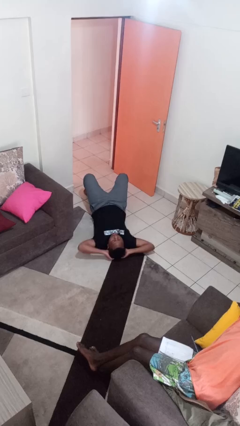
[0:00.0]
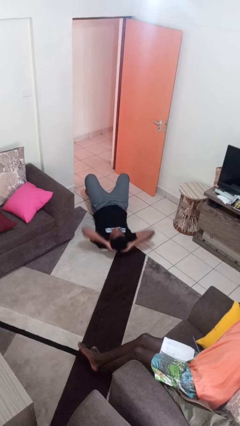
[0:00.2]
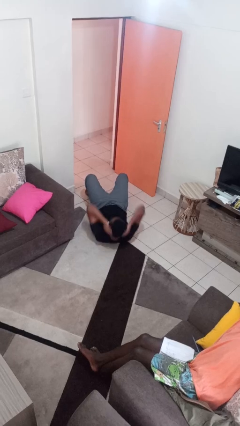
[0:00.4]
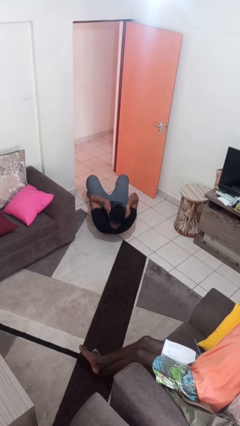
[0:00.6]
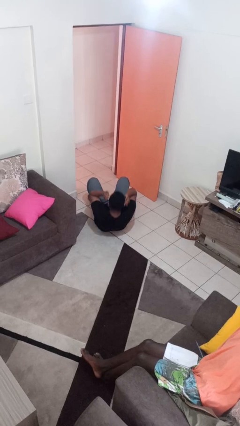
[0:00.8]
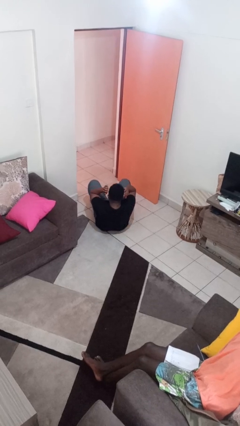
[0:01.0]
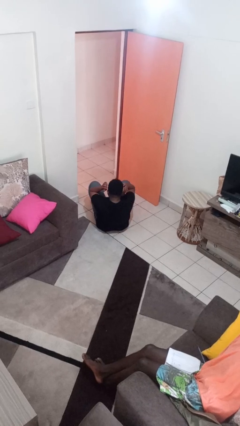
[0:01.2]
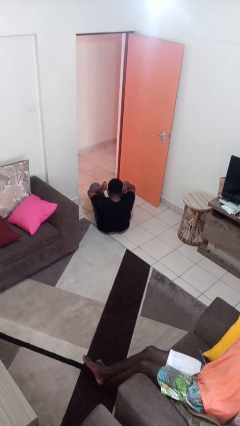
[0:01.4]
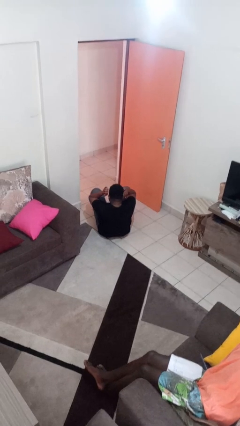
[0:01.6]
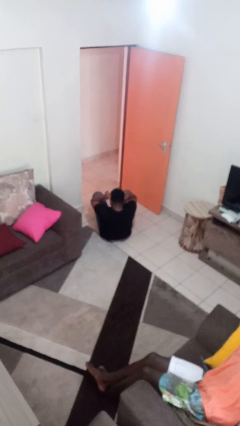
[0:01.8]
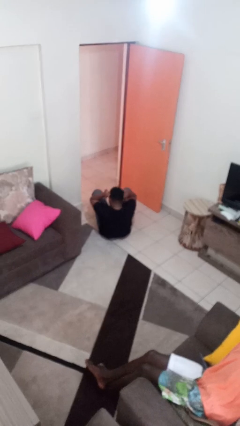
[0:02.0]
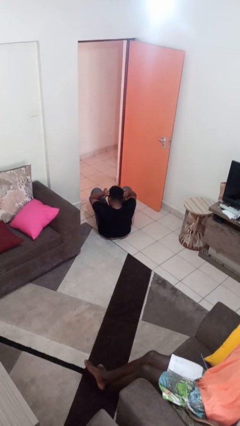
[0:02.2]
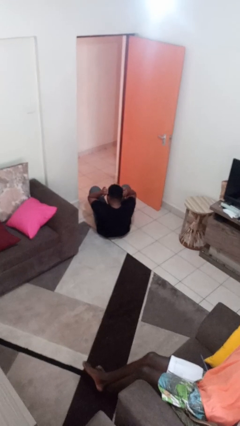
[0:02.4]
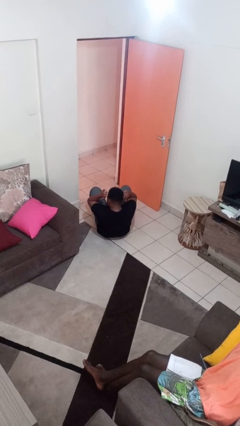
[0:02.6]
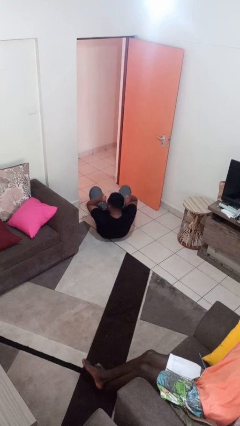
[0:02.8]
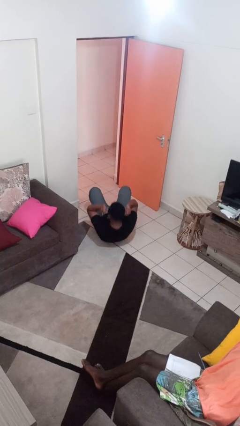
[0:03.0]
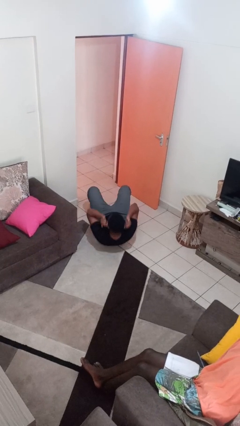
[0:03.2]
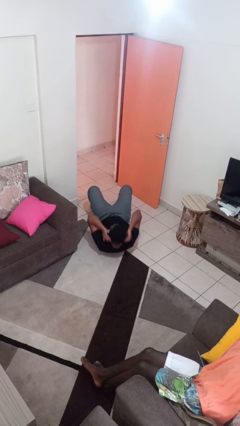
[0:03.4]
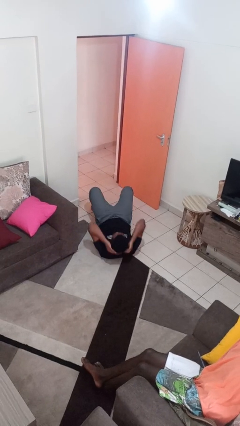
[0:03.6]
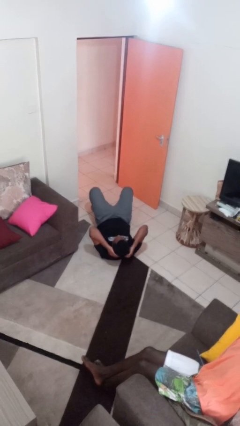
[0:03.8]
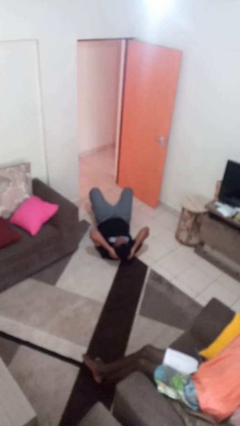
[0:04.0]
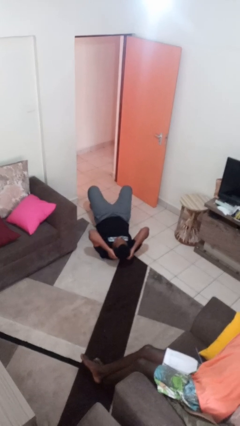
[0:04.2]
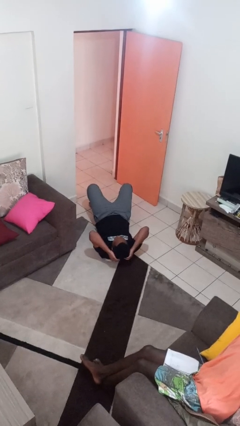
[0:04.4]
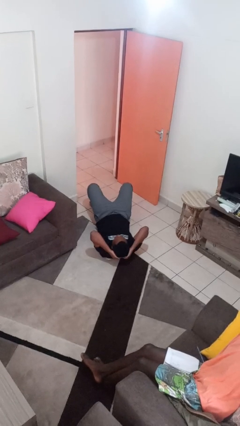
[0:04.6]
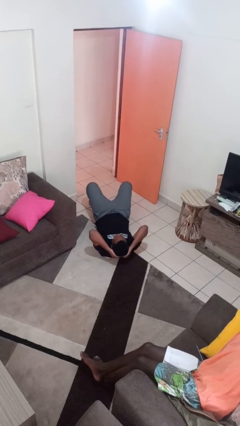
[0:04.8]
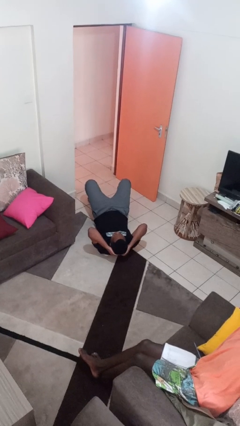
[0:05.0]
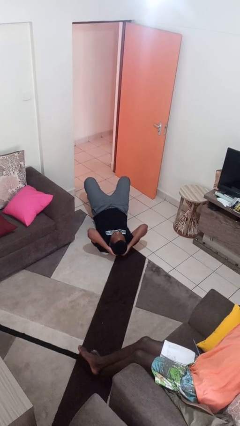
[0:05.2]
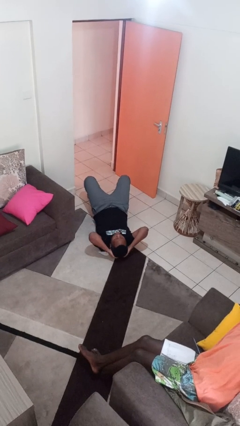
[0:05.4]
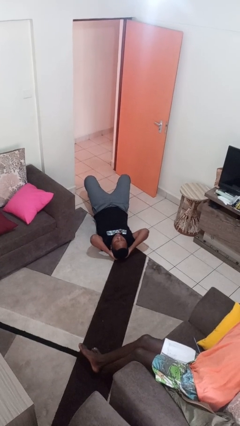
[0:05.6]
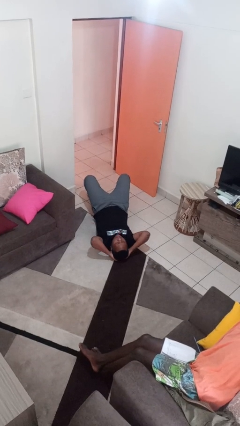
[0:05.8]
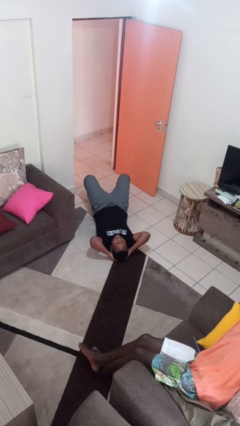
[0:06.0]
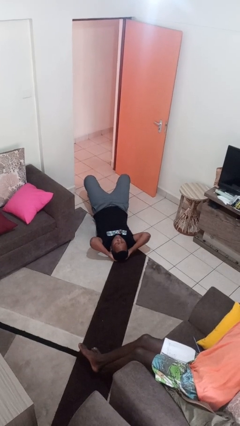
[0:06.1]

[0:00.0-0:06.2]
person exercises with situp

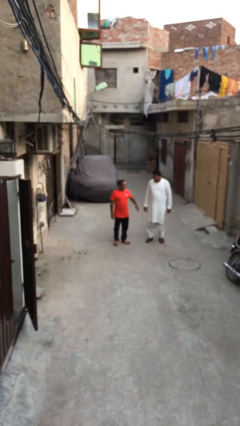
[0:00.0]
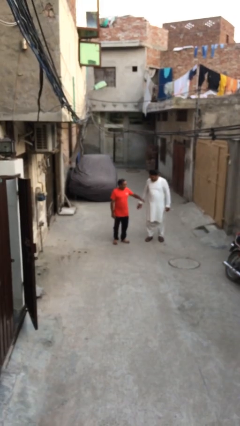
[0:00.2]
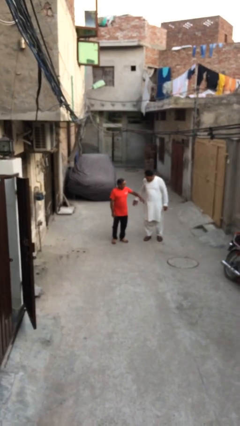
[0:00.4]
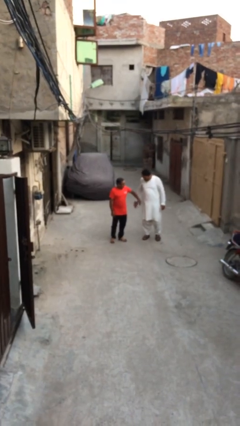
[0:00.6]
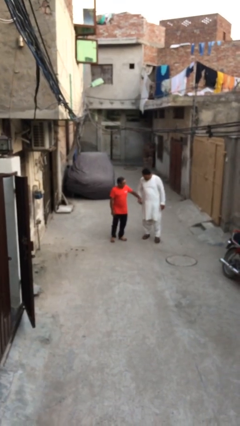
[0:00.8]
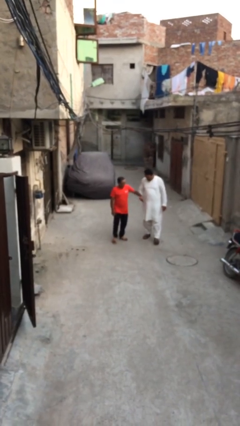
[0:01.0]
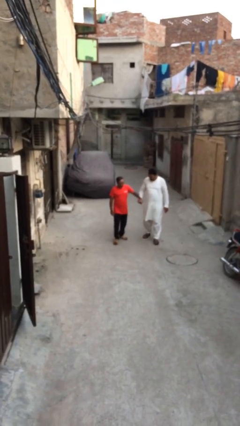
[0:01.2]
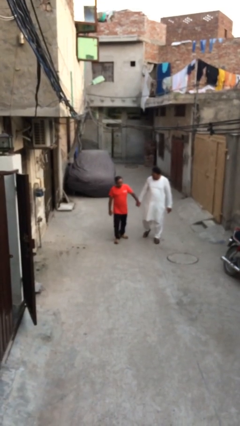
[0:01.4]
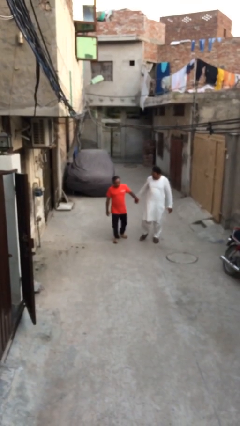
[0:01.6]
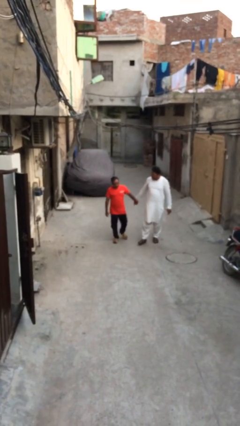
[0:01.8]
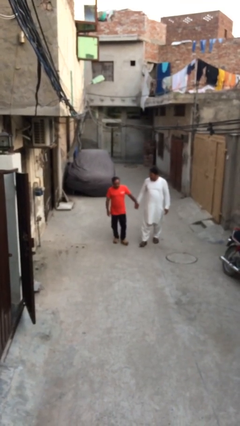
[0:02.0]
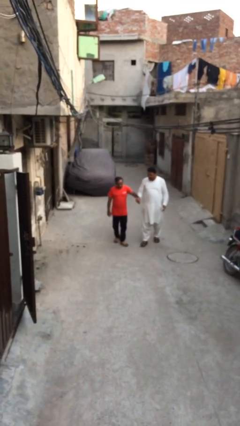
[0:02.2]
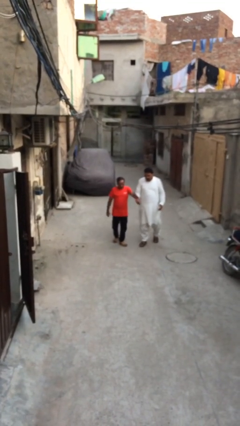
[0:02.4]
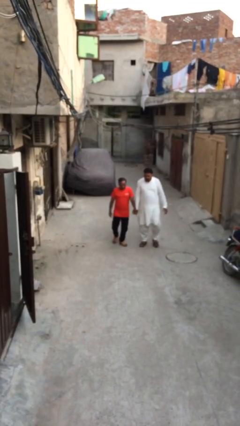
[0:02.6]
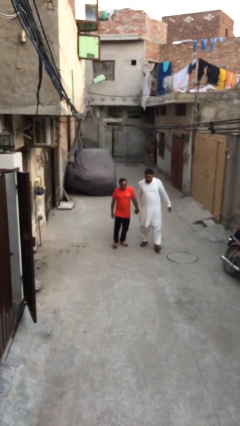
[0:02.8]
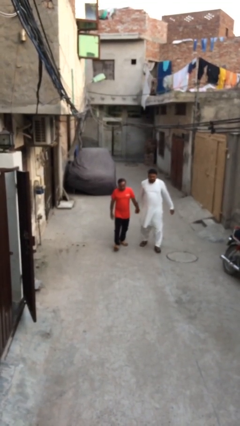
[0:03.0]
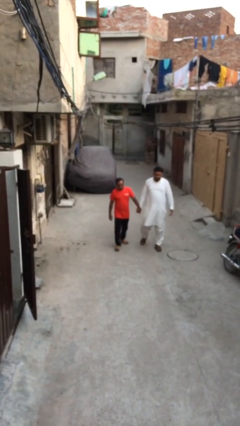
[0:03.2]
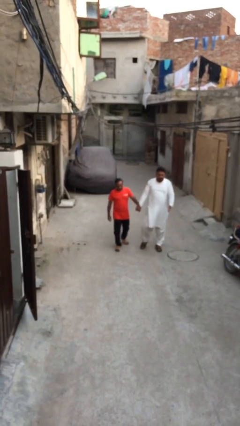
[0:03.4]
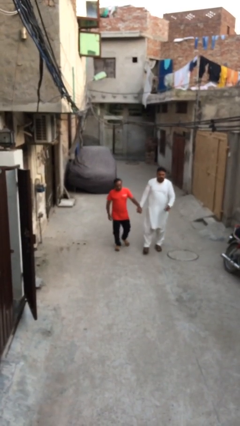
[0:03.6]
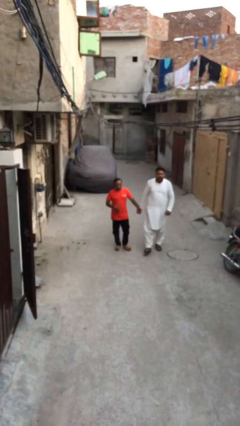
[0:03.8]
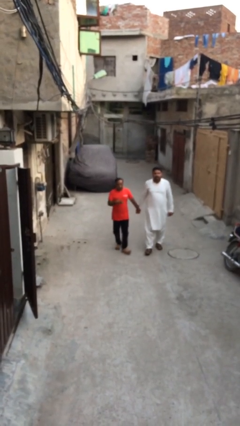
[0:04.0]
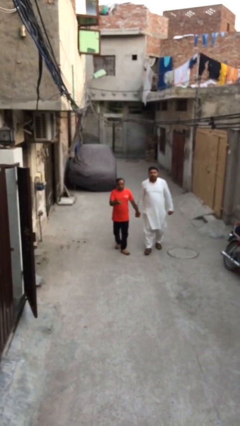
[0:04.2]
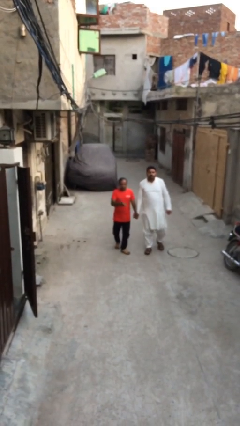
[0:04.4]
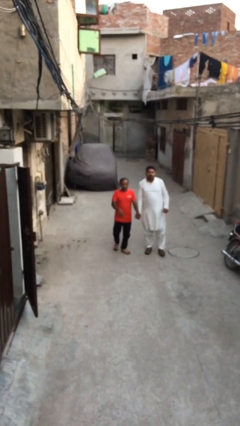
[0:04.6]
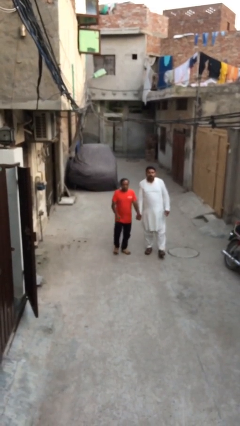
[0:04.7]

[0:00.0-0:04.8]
person holds hand

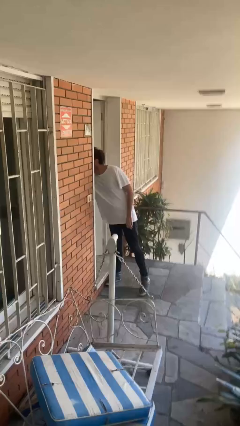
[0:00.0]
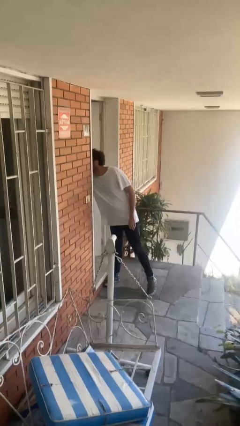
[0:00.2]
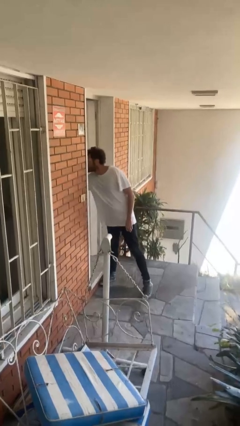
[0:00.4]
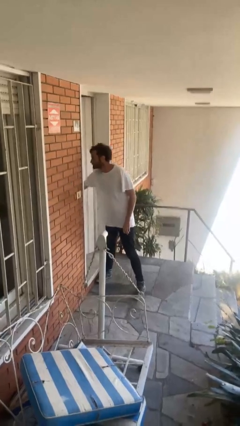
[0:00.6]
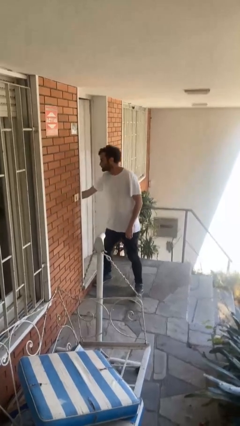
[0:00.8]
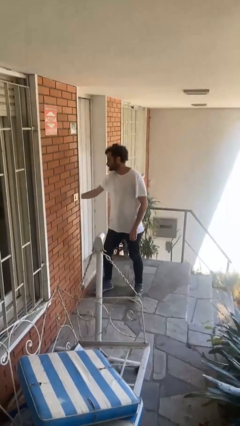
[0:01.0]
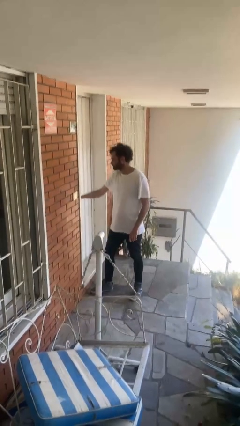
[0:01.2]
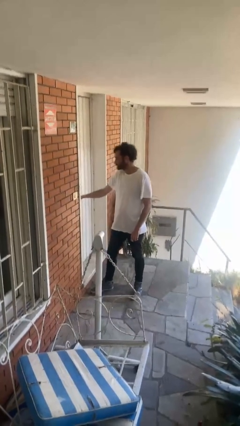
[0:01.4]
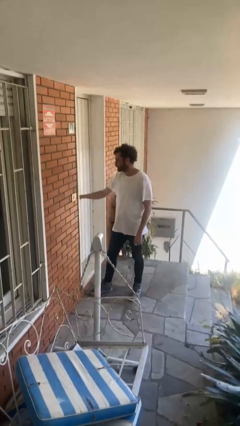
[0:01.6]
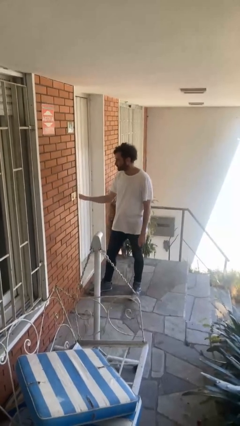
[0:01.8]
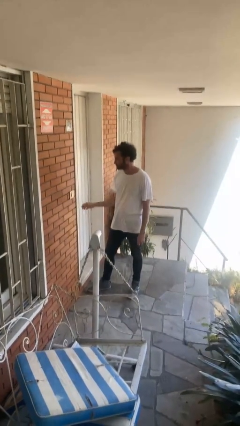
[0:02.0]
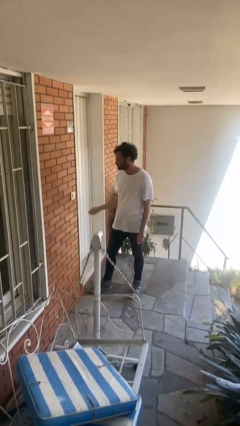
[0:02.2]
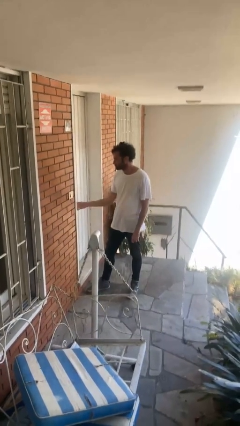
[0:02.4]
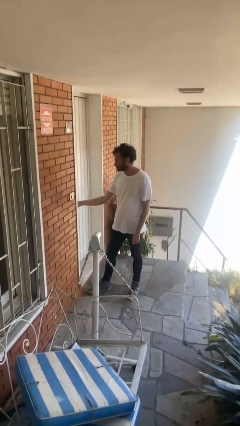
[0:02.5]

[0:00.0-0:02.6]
person closes facility door

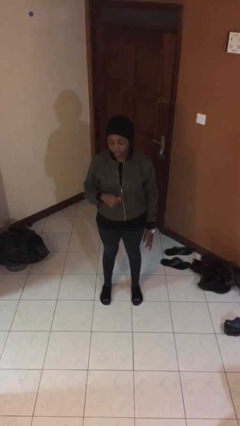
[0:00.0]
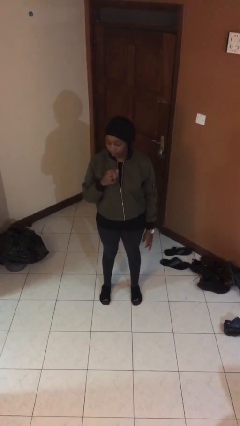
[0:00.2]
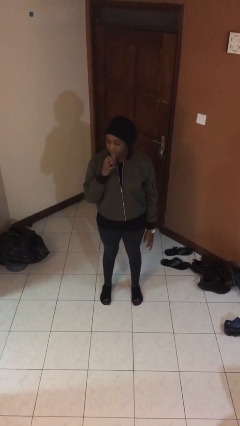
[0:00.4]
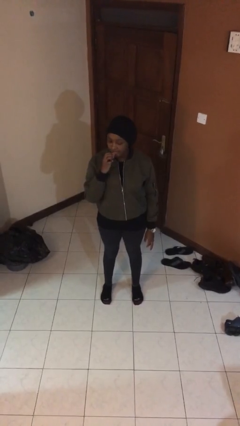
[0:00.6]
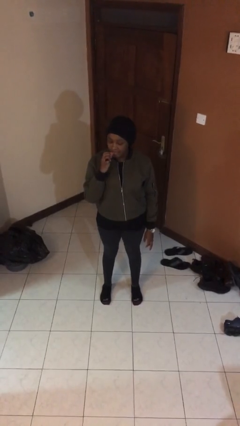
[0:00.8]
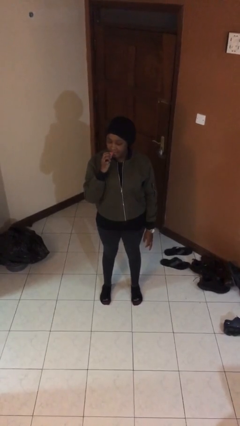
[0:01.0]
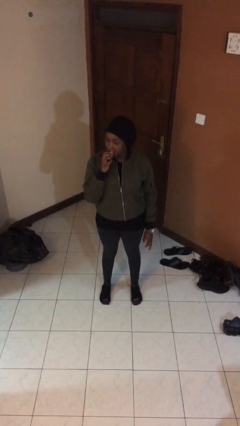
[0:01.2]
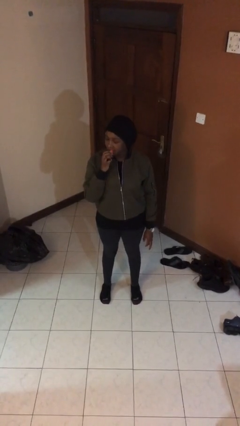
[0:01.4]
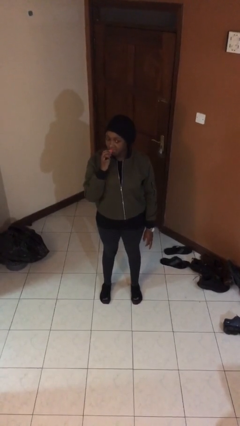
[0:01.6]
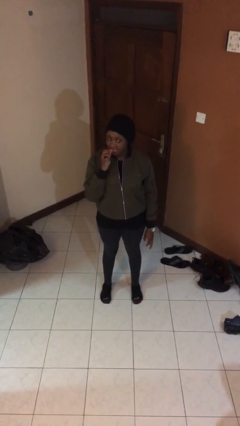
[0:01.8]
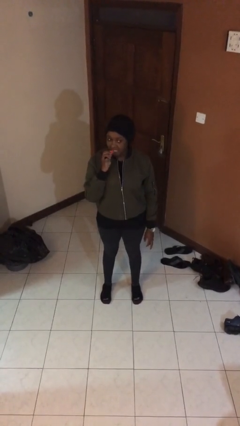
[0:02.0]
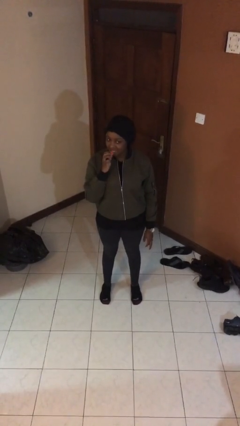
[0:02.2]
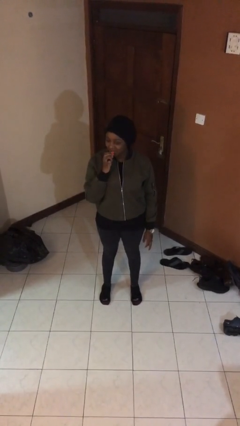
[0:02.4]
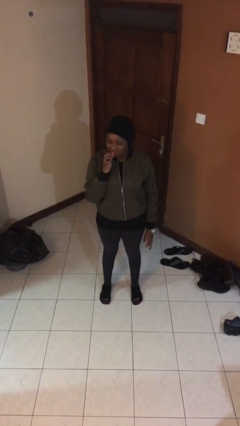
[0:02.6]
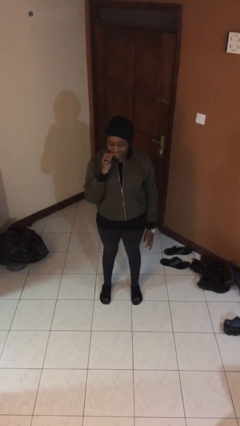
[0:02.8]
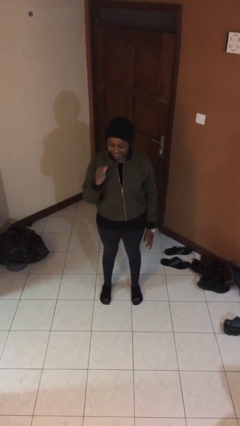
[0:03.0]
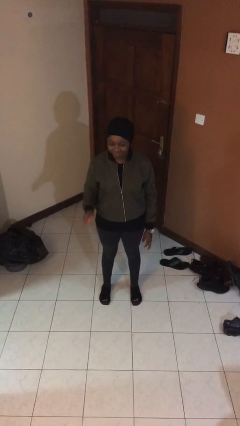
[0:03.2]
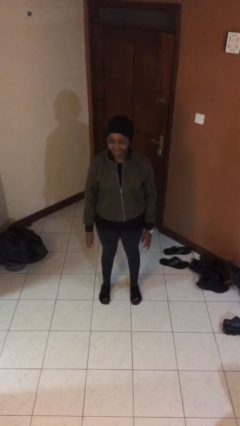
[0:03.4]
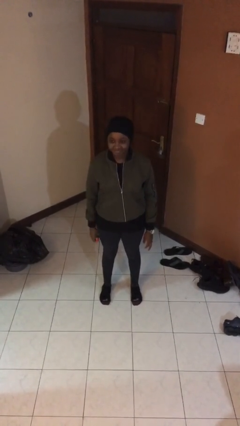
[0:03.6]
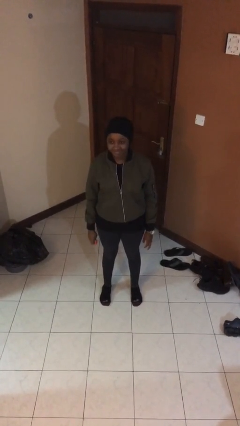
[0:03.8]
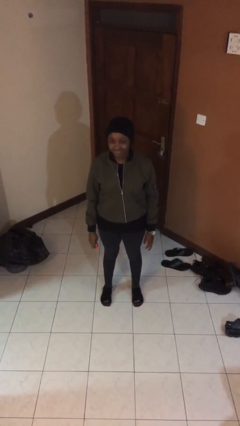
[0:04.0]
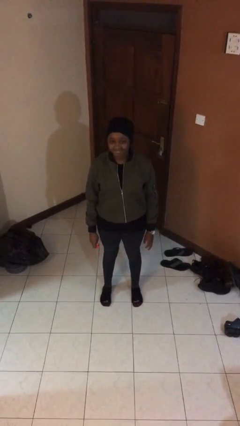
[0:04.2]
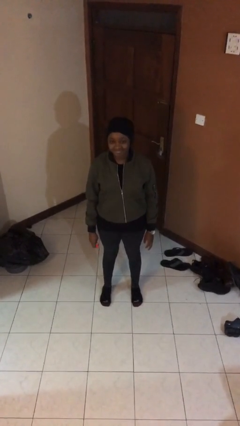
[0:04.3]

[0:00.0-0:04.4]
person applies lip makeup
